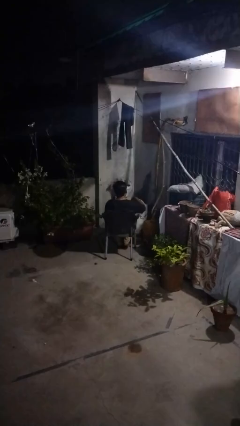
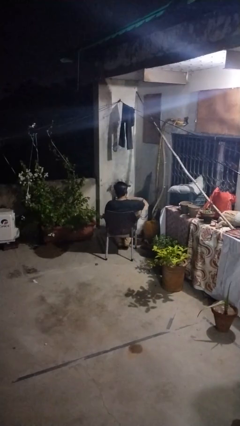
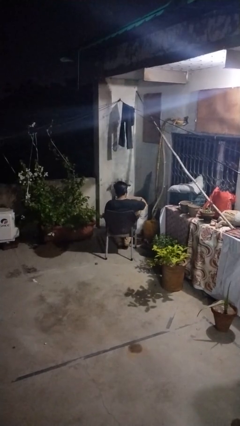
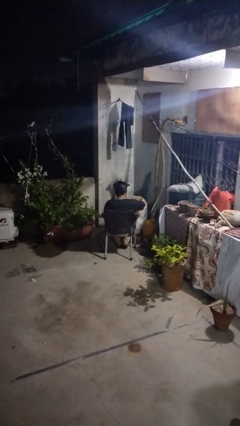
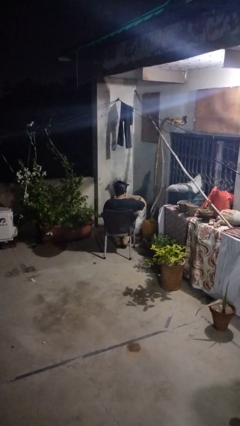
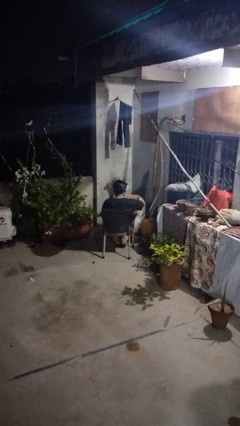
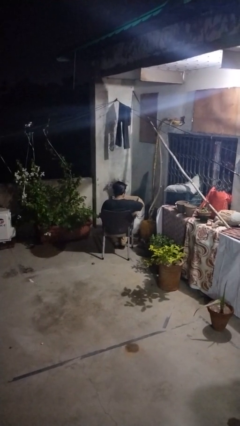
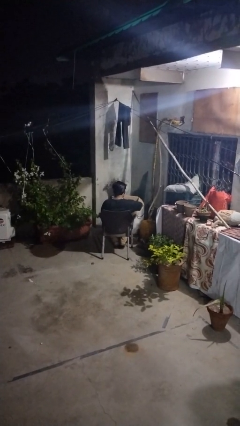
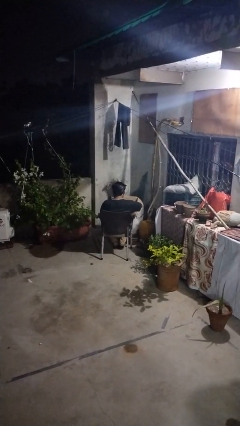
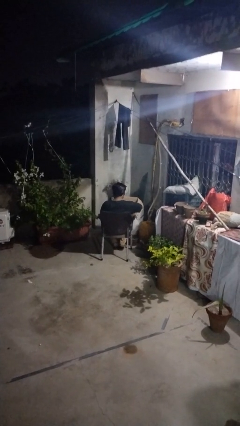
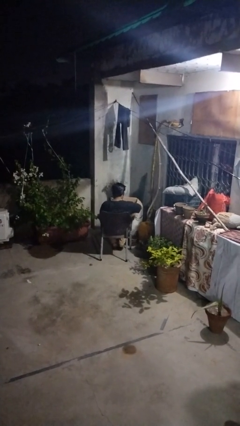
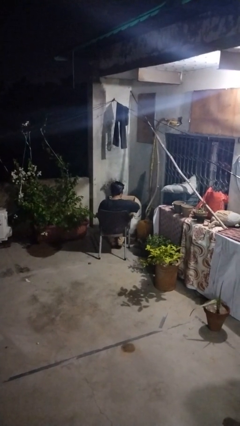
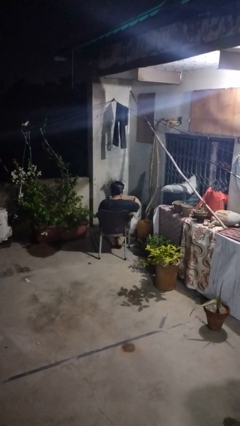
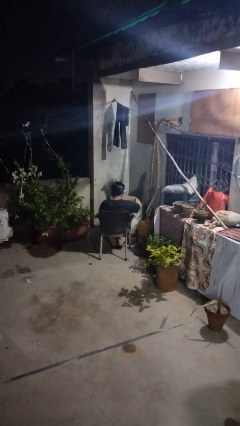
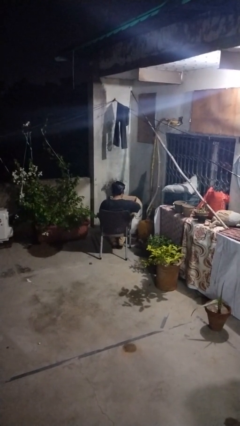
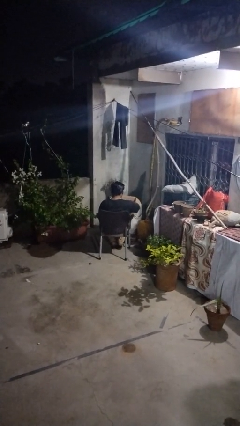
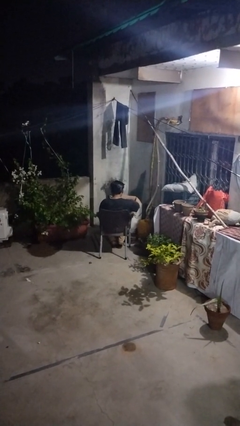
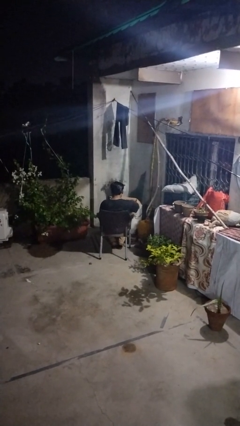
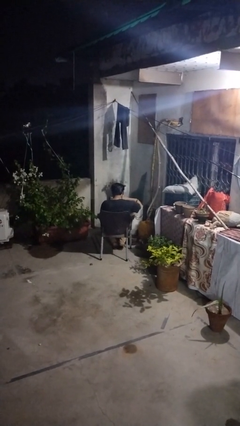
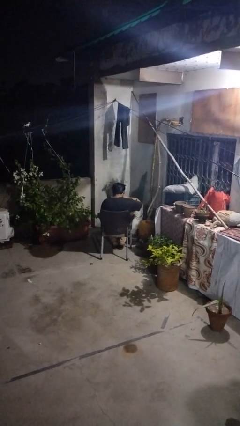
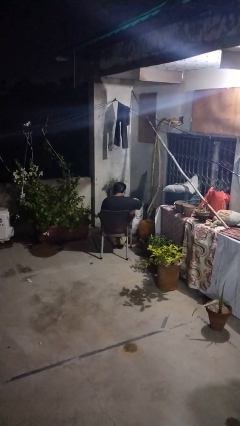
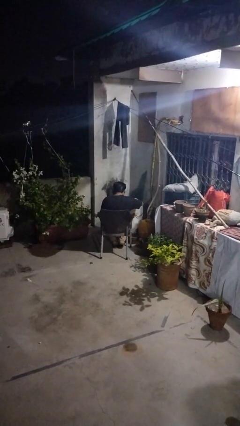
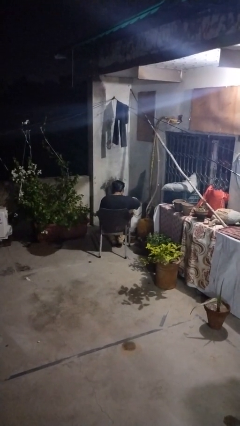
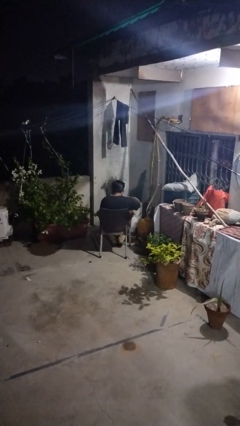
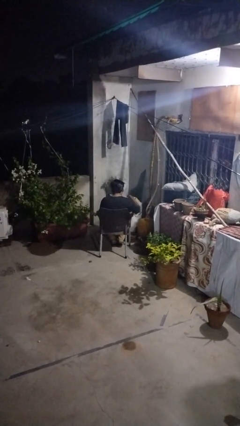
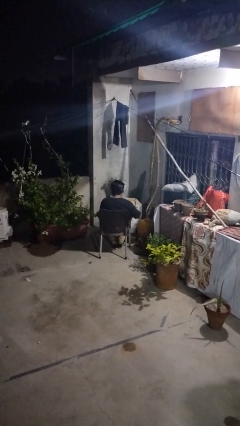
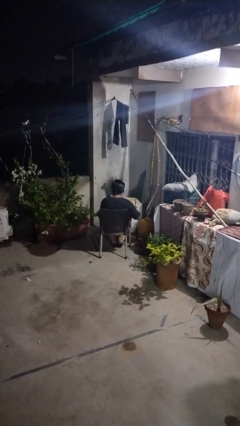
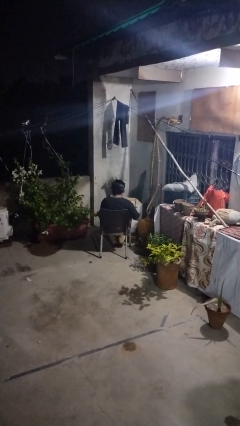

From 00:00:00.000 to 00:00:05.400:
person searches in box

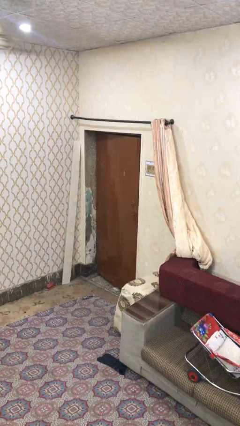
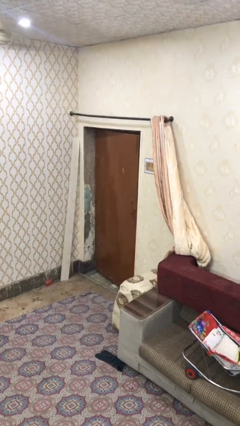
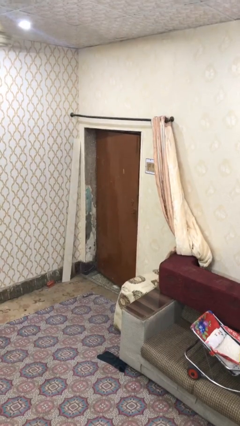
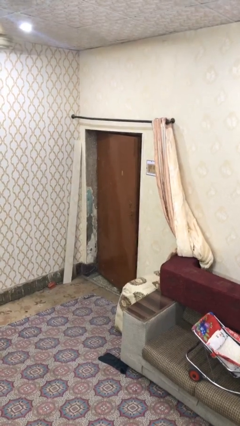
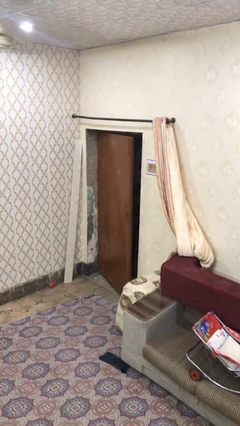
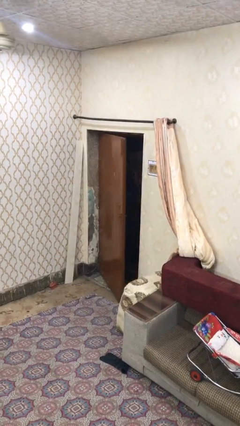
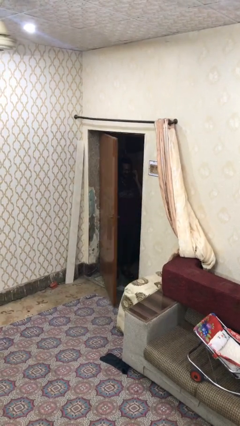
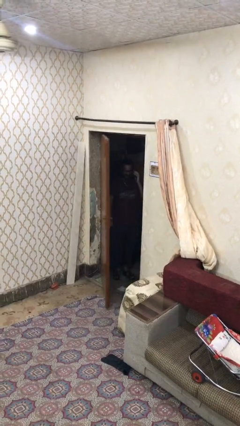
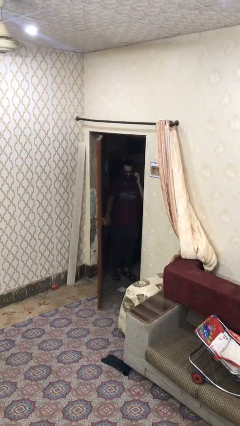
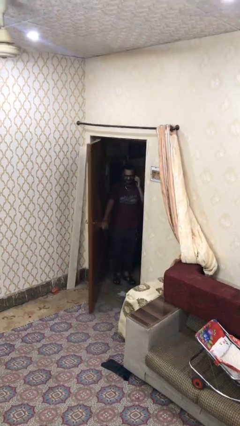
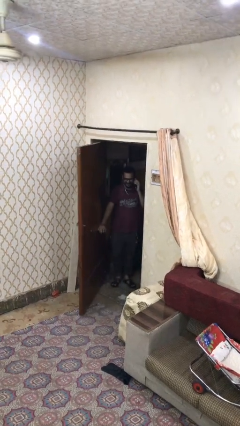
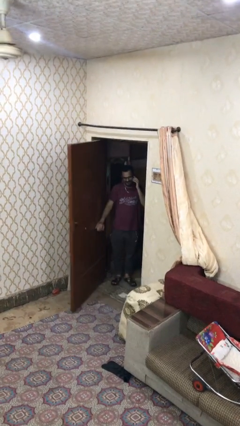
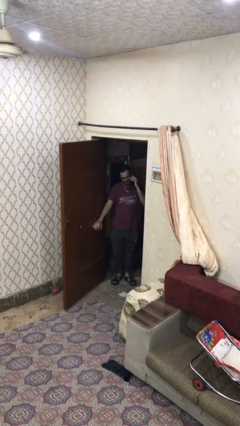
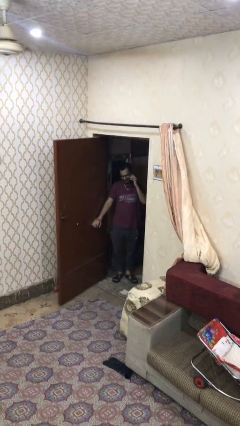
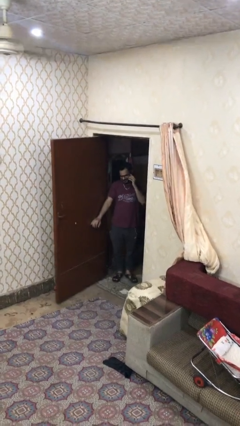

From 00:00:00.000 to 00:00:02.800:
person opens facility door

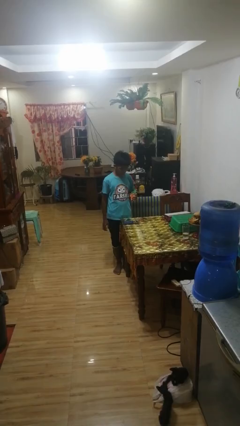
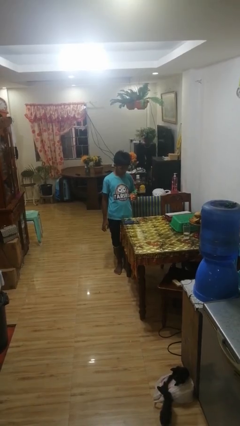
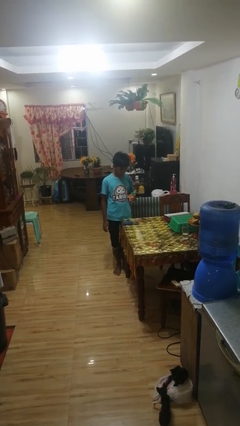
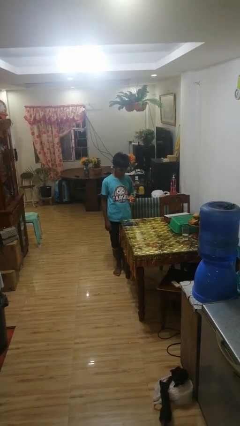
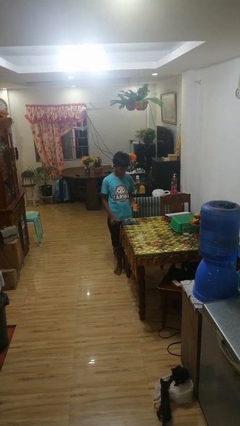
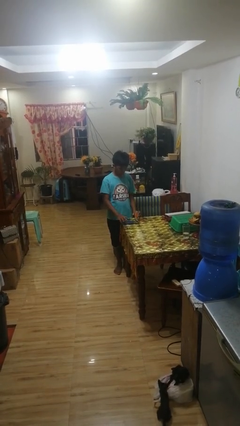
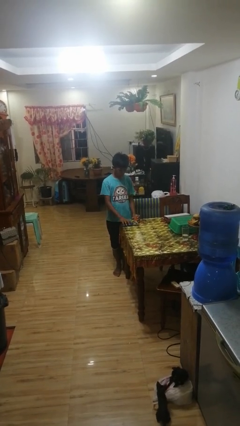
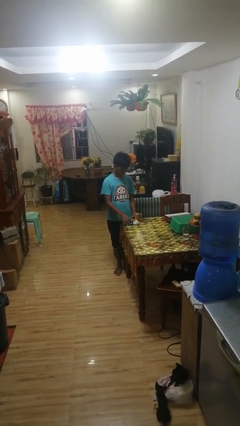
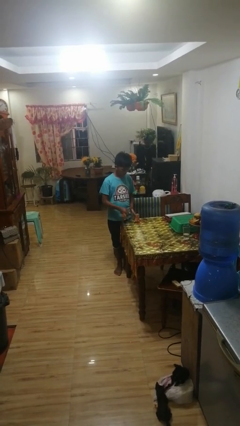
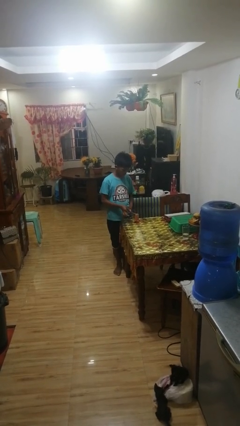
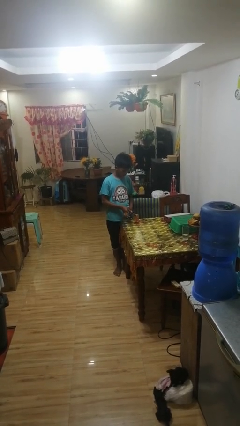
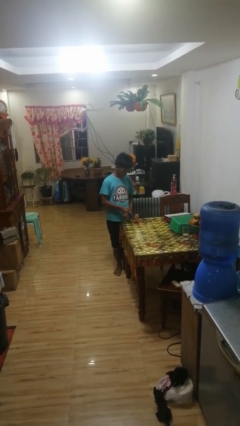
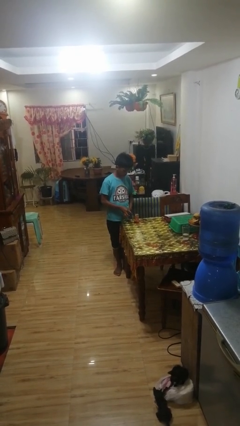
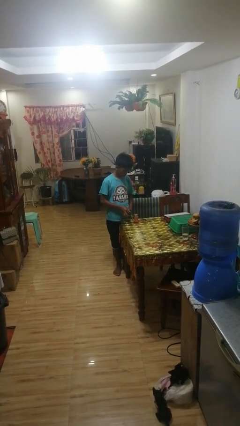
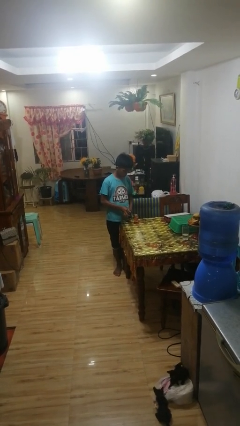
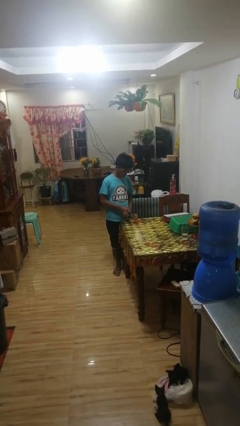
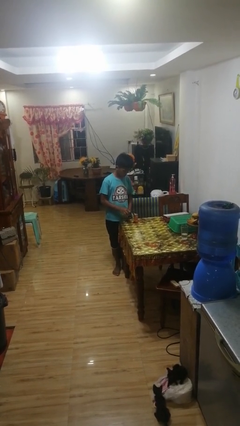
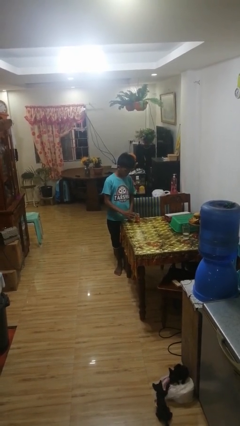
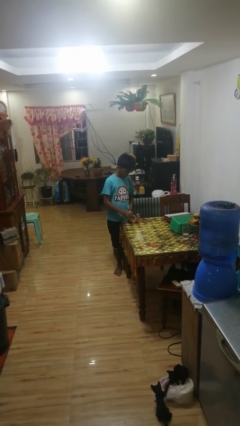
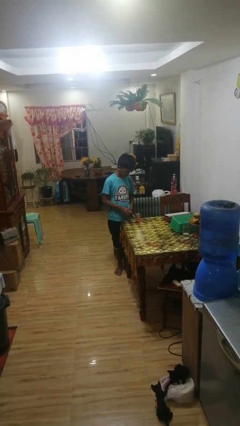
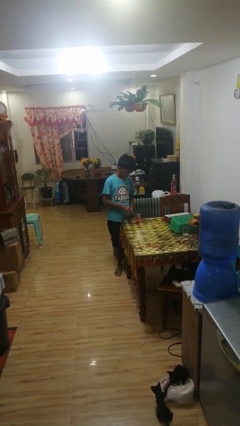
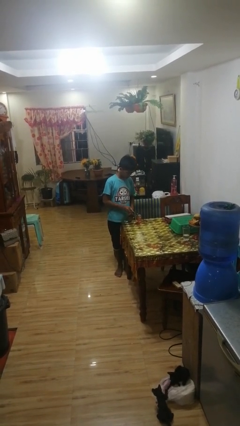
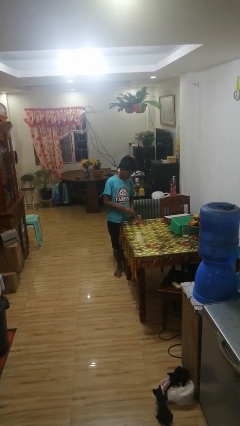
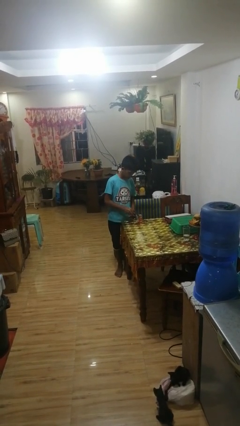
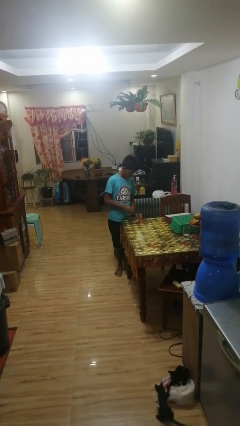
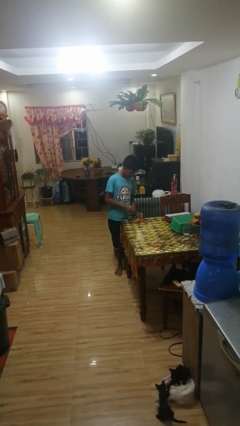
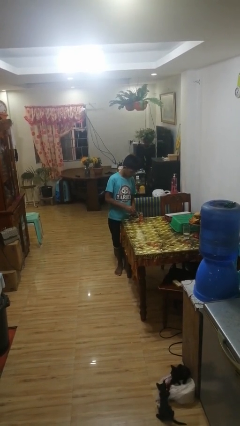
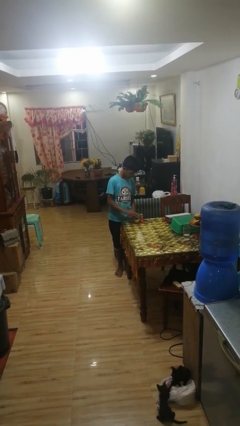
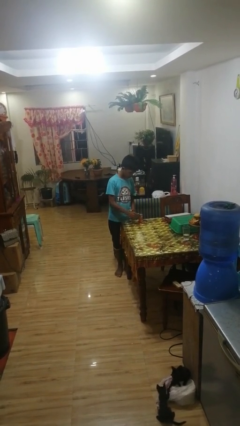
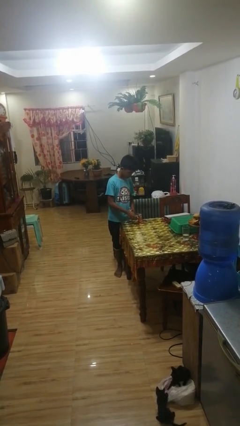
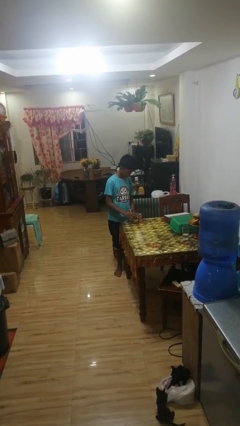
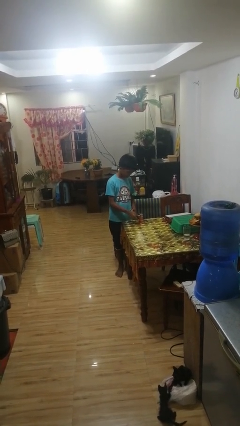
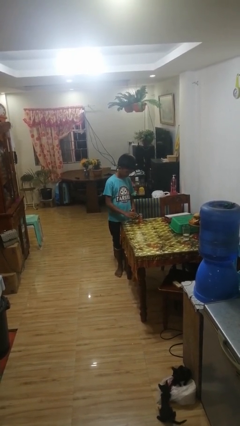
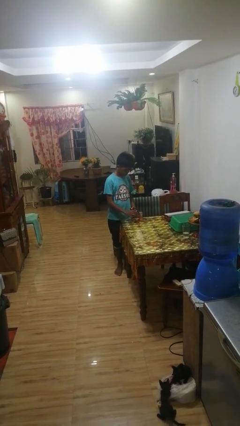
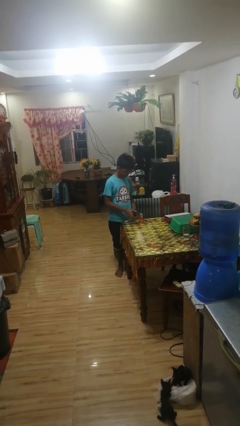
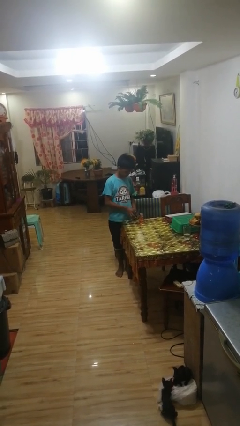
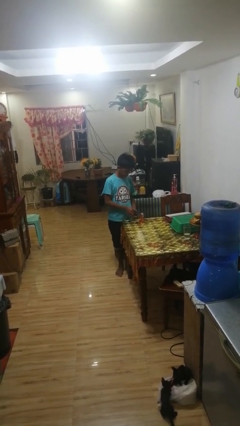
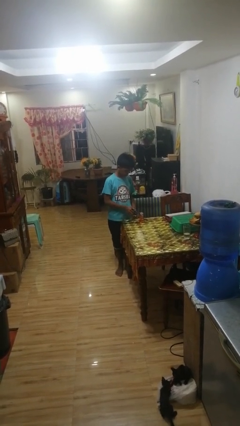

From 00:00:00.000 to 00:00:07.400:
person opens can with can opener

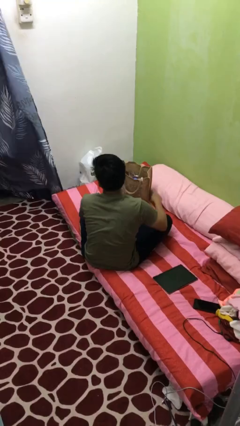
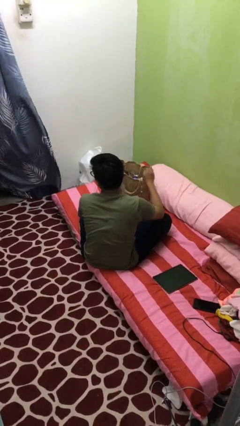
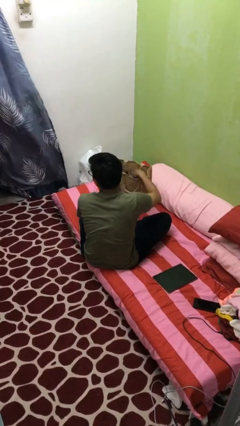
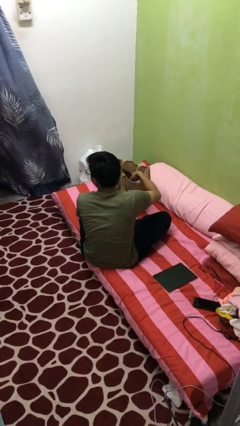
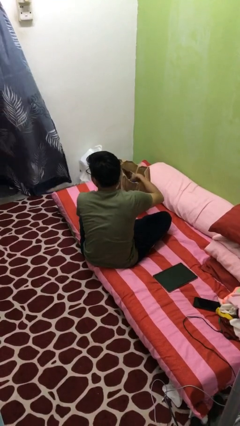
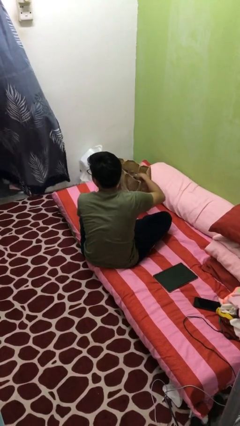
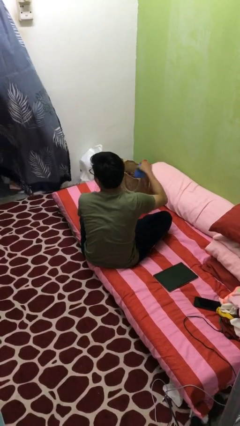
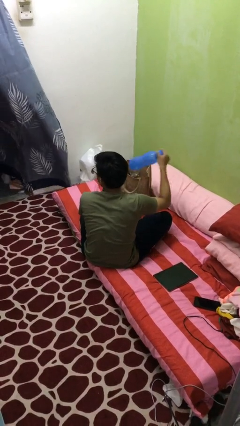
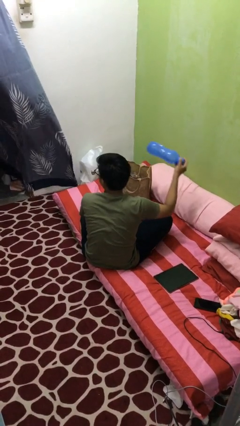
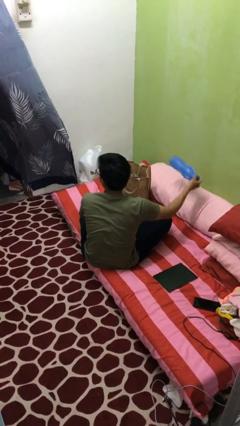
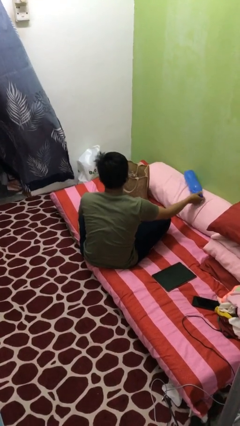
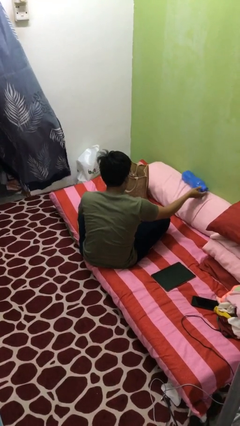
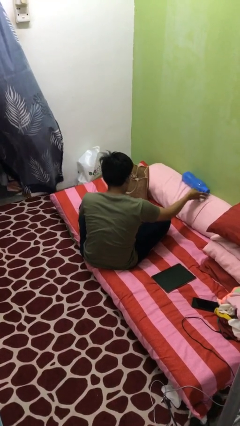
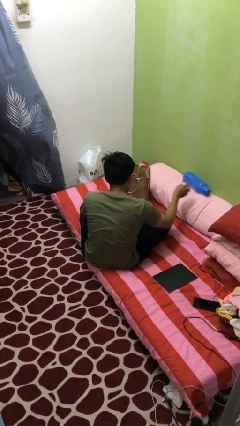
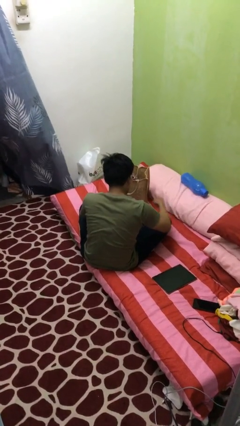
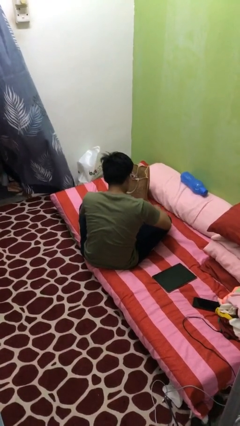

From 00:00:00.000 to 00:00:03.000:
person takes object from bag
